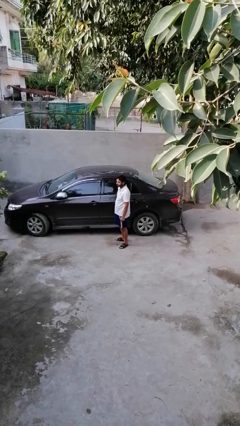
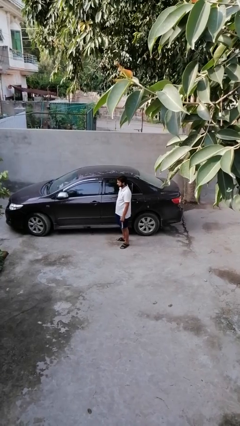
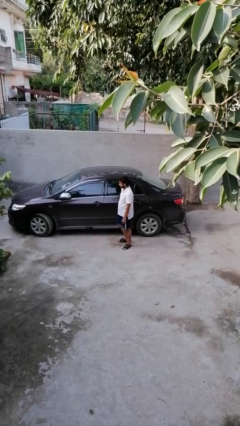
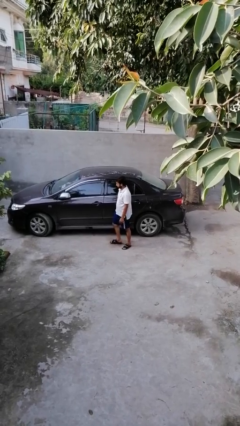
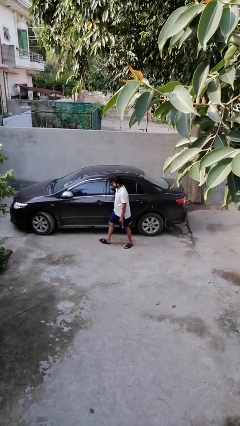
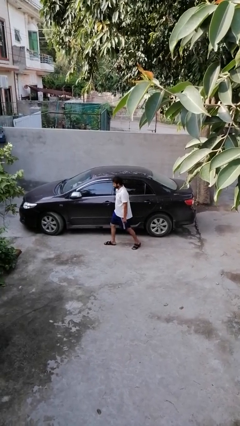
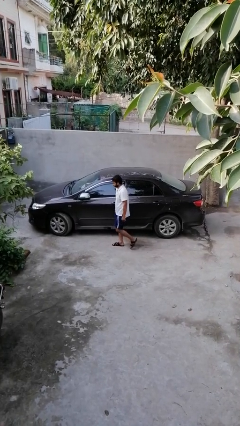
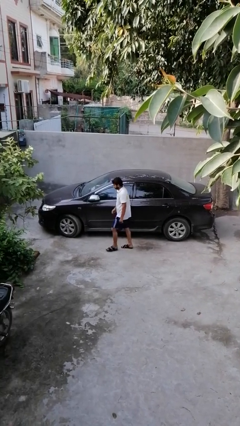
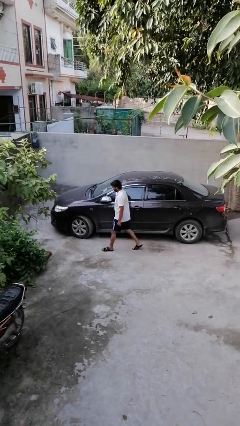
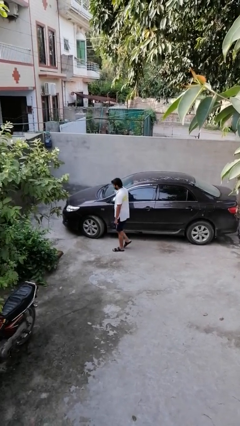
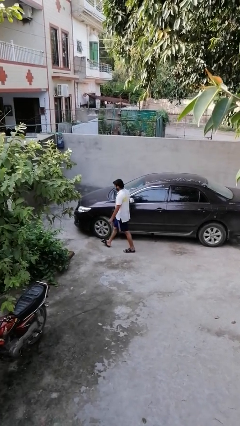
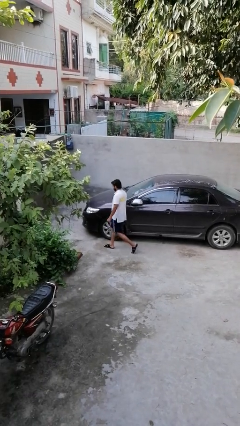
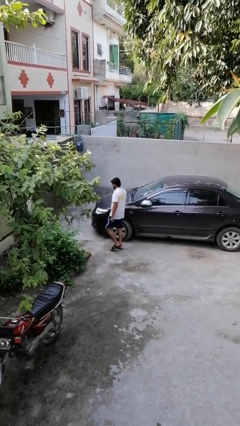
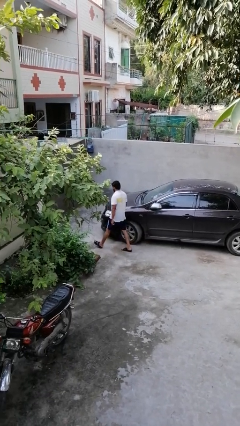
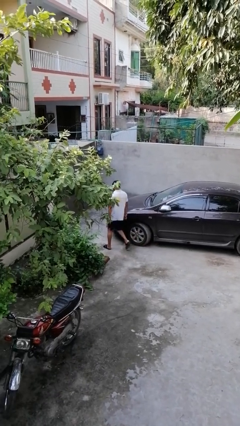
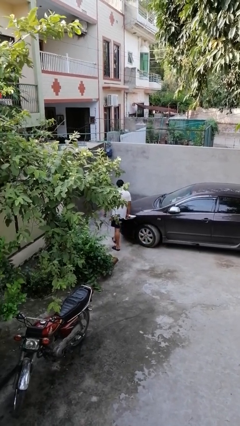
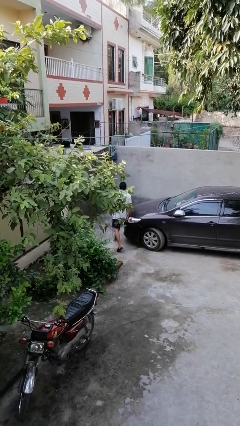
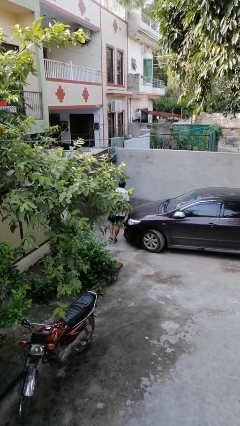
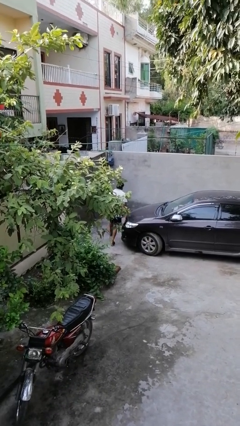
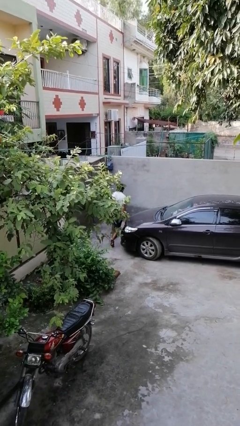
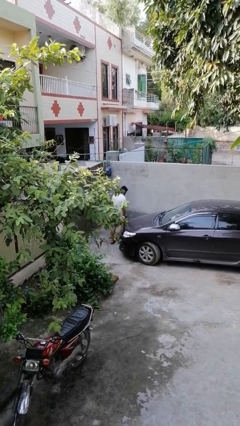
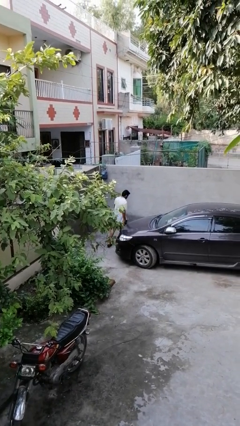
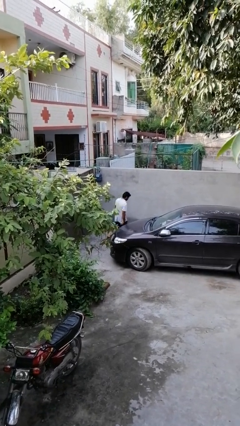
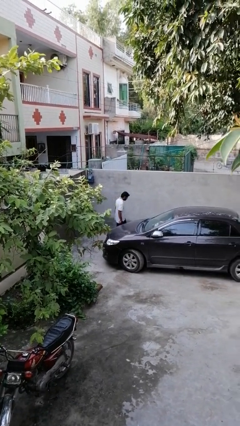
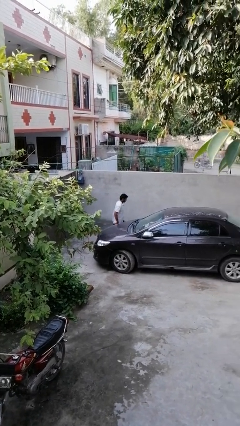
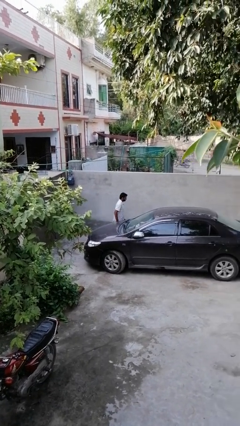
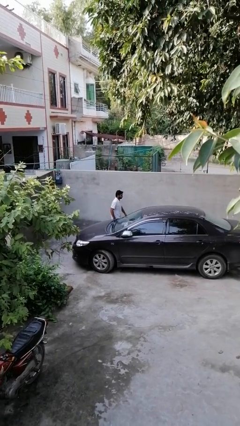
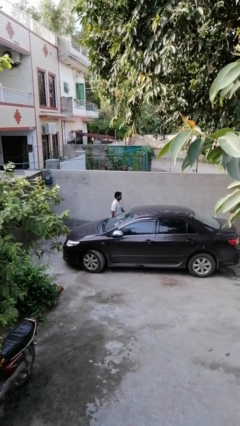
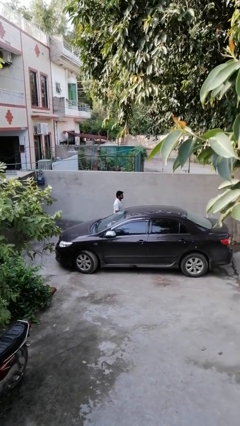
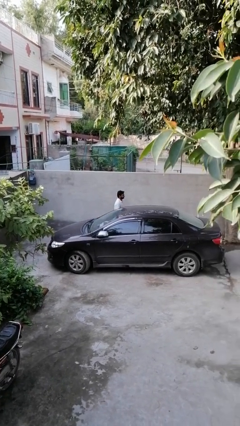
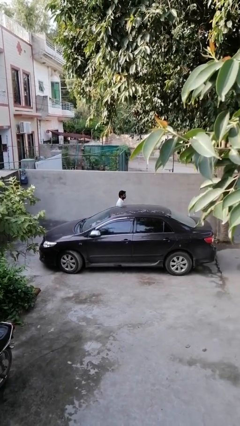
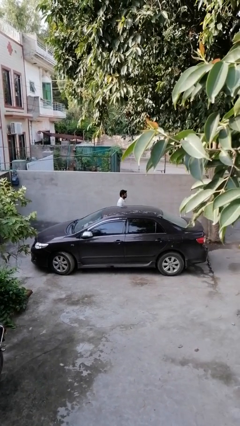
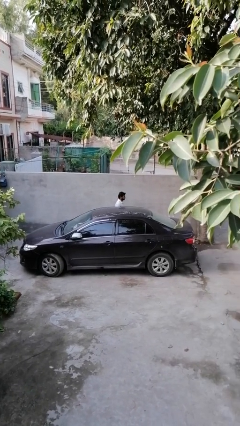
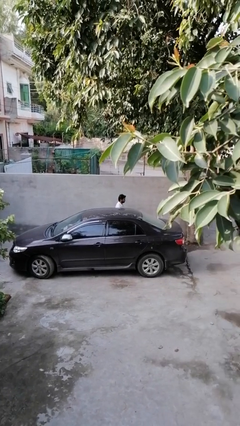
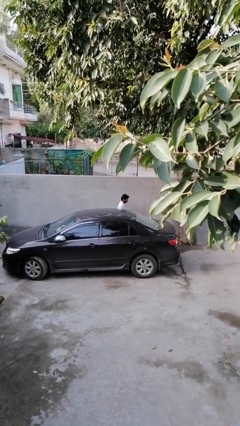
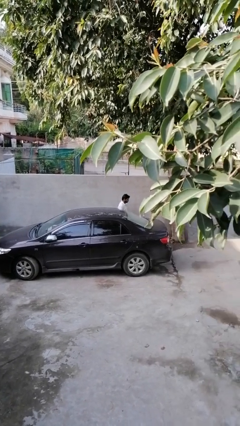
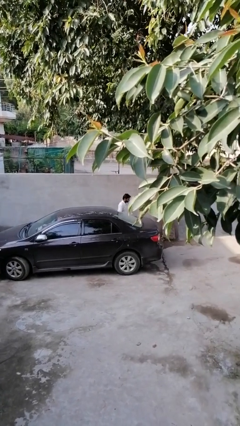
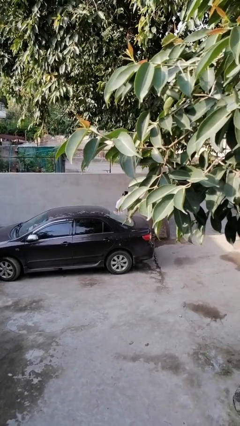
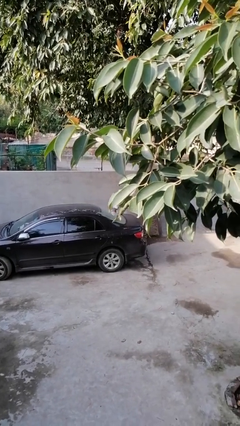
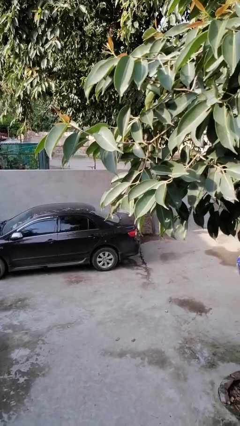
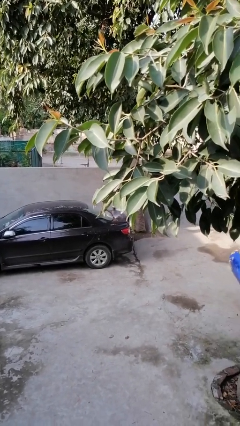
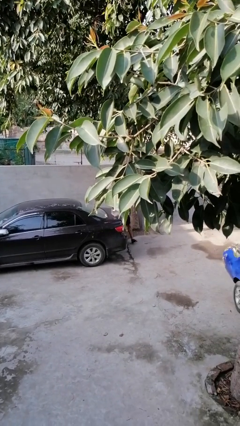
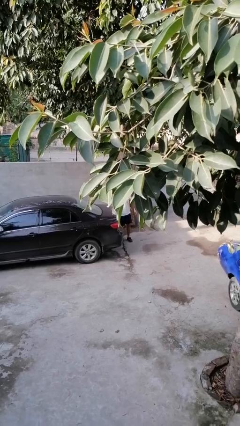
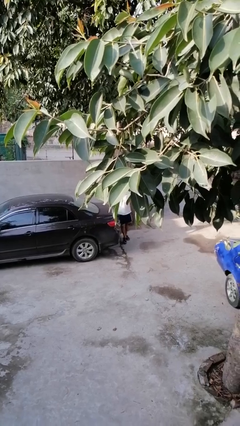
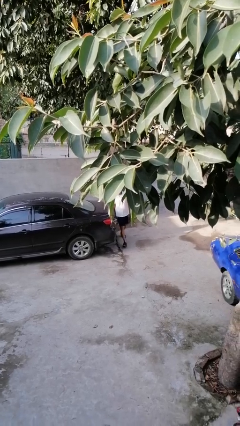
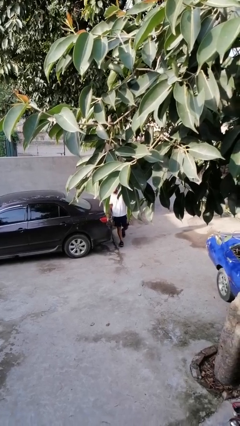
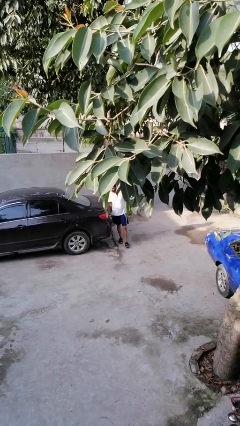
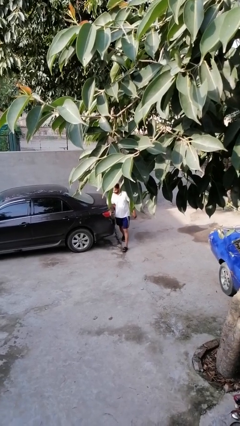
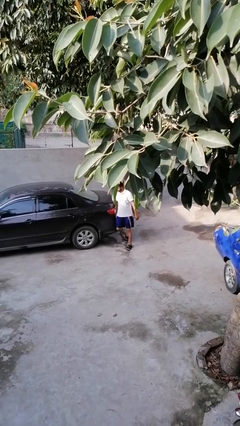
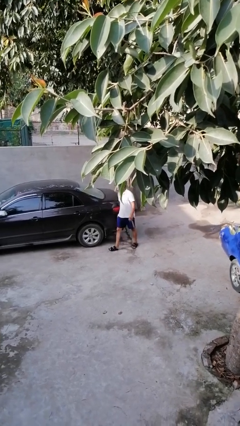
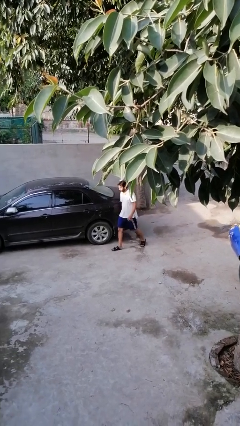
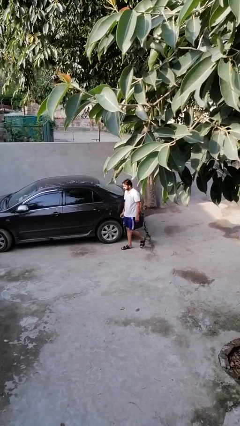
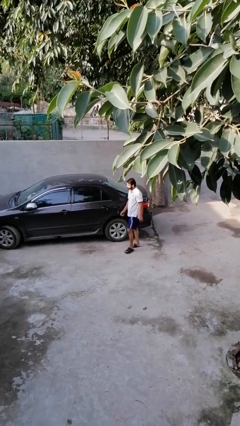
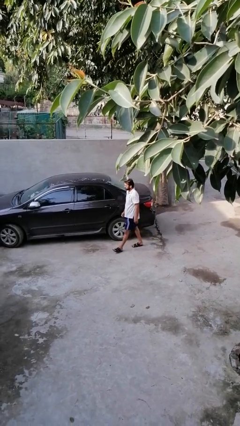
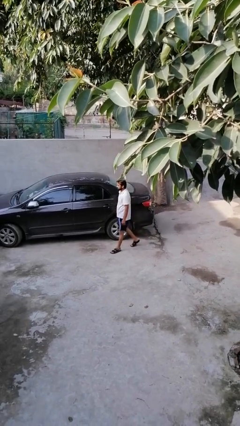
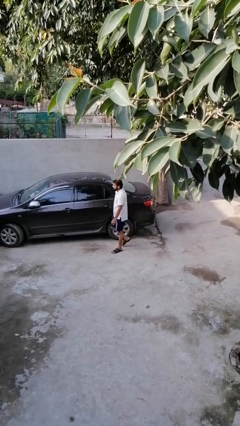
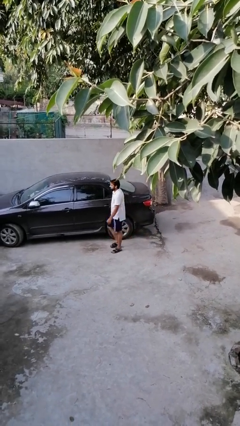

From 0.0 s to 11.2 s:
person walks around car

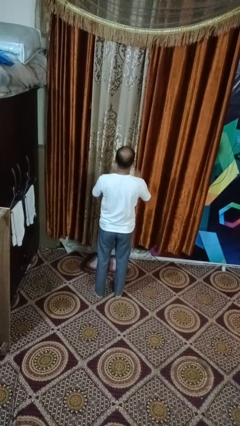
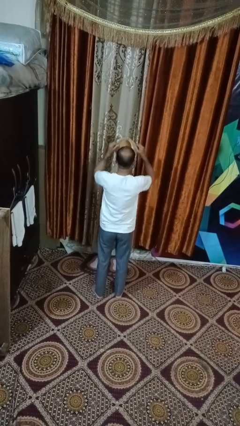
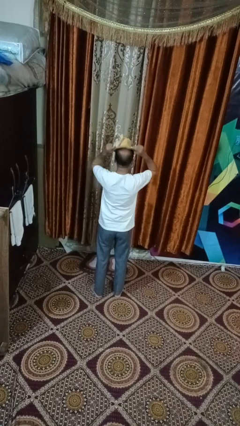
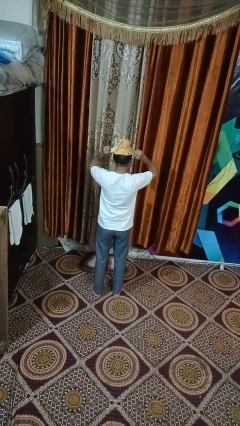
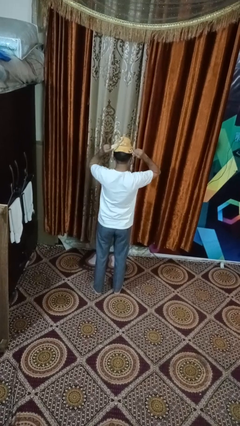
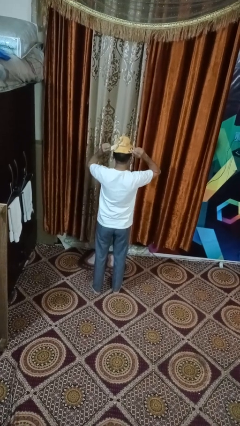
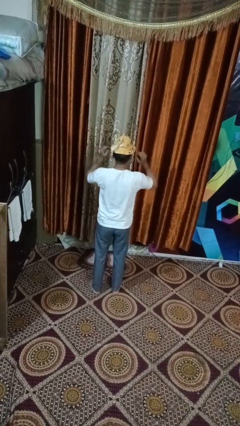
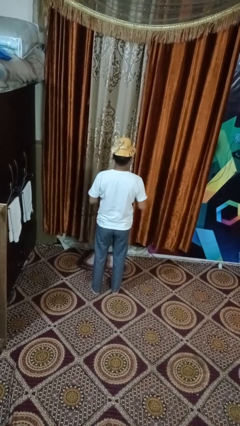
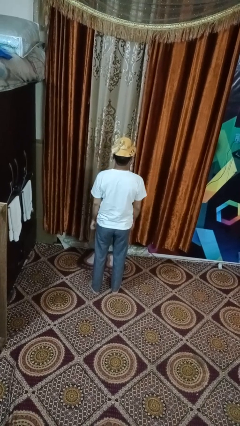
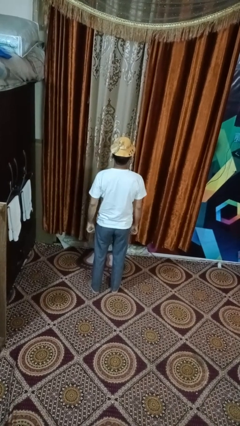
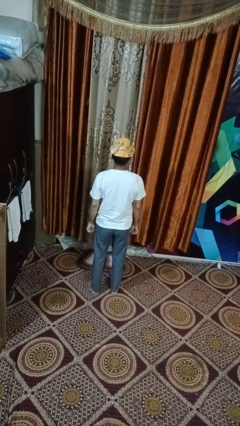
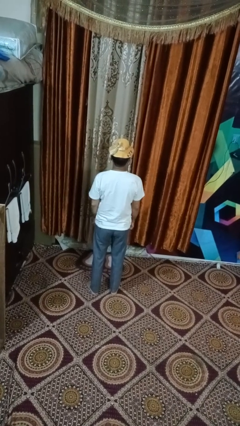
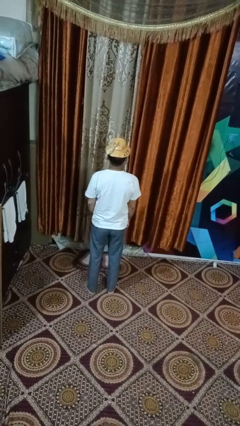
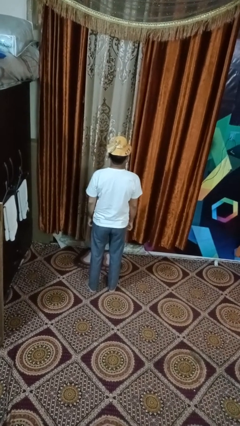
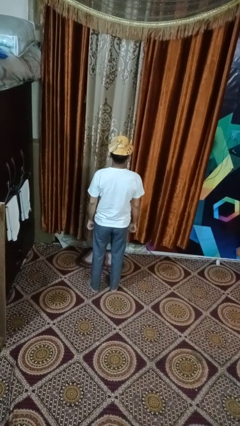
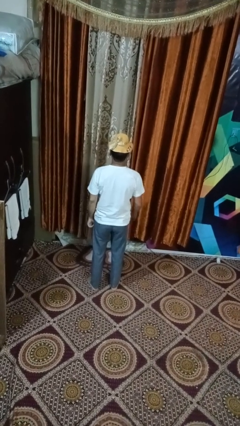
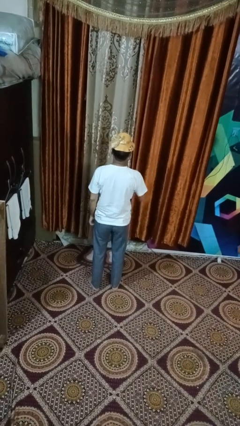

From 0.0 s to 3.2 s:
person puts on hat

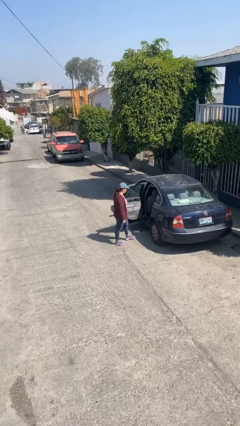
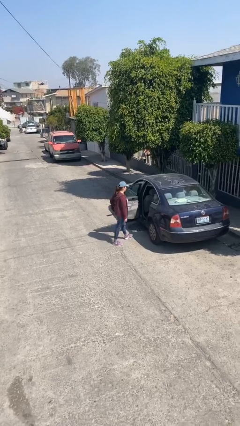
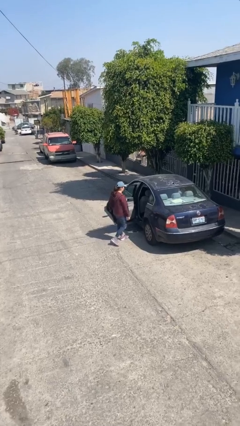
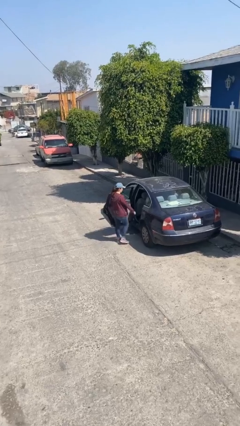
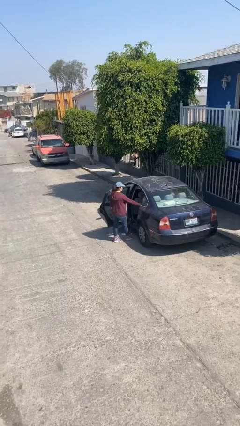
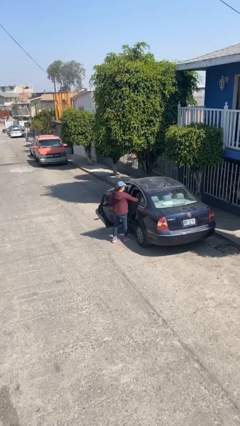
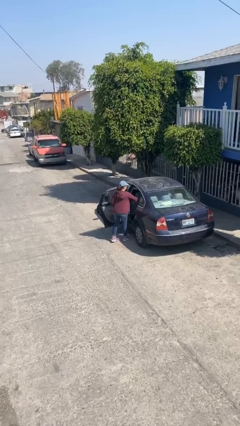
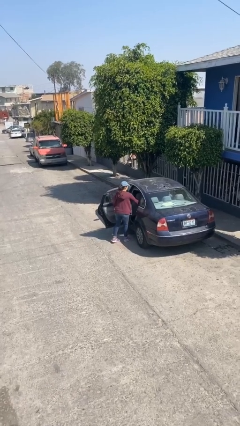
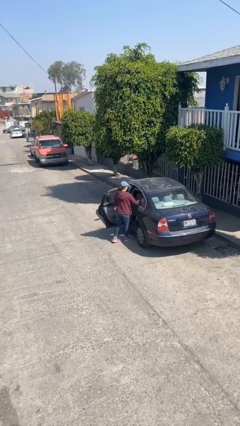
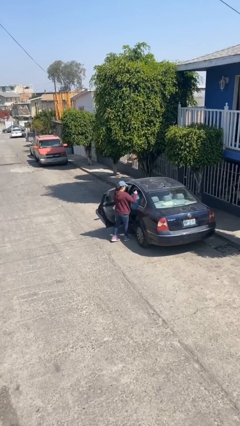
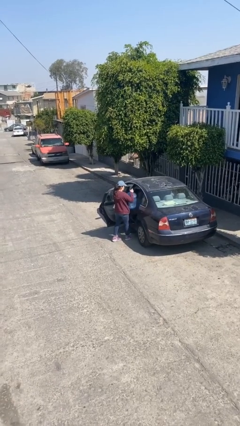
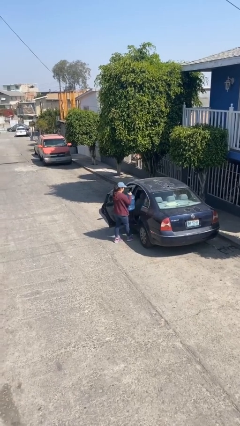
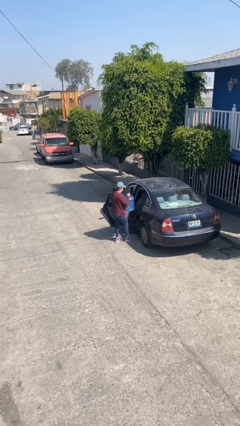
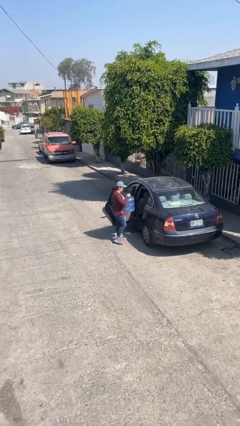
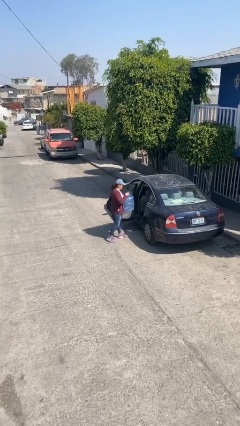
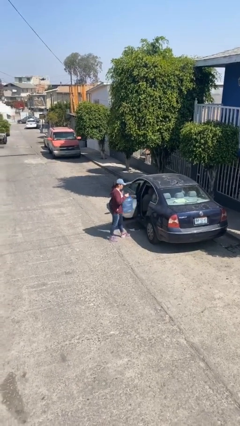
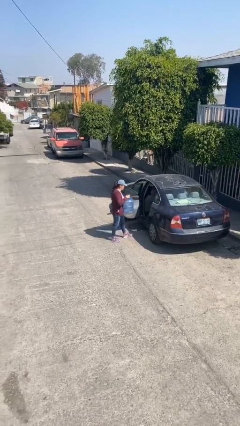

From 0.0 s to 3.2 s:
person unloads car

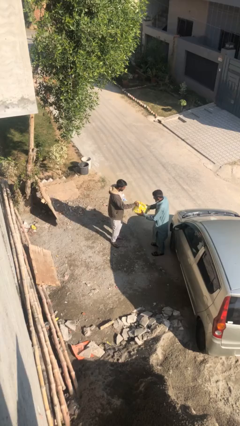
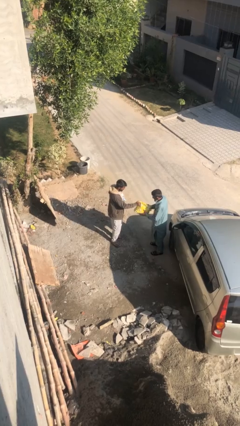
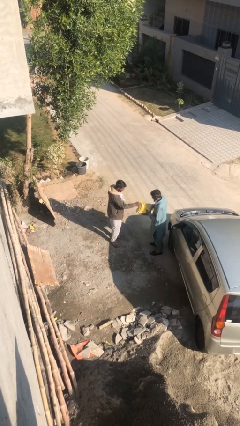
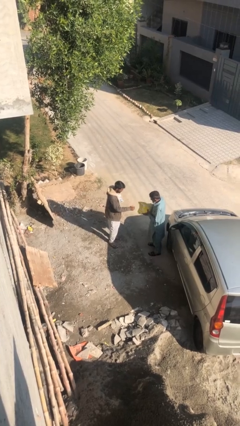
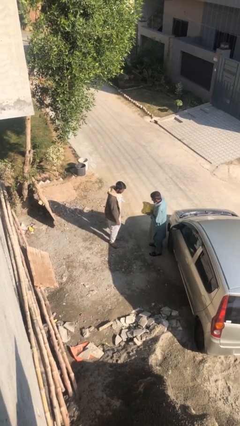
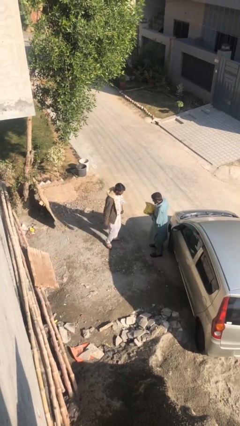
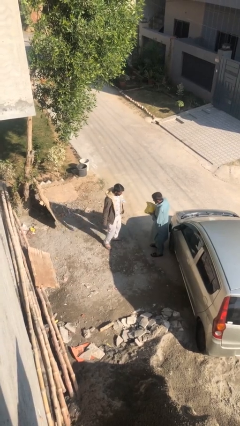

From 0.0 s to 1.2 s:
person transfers object to person
